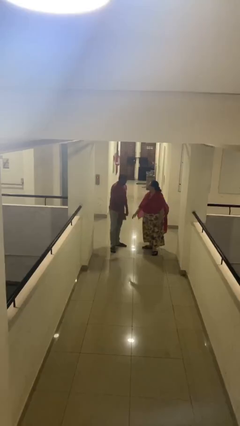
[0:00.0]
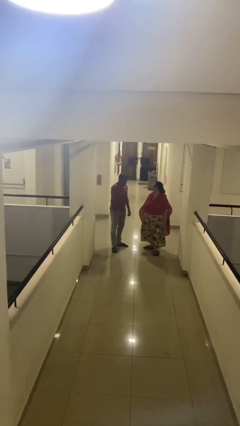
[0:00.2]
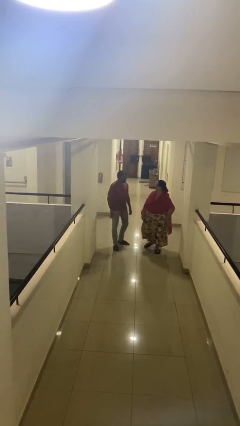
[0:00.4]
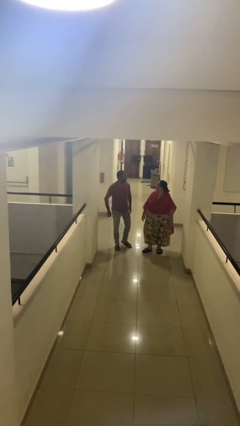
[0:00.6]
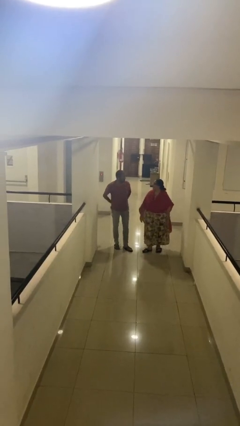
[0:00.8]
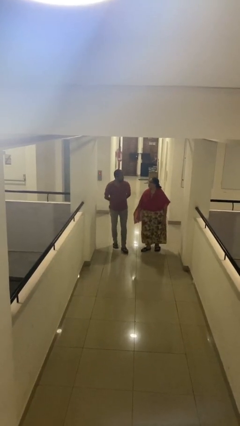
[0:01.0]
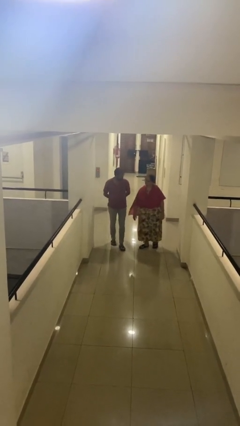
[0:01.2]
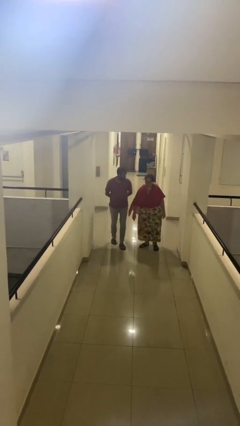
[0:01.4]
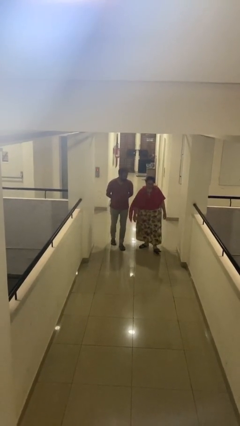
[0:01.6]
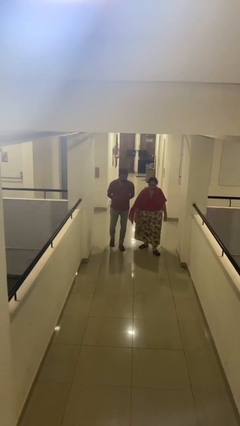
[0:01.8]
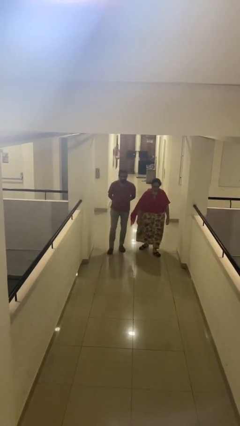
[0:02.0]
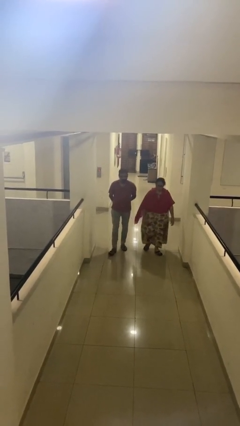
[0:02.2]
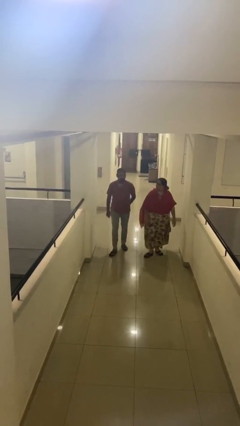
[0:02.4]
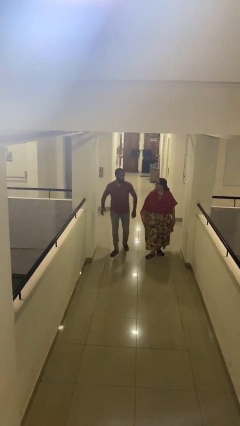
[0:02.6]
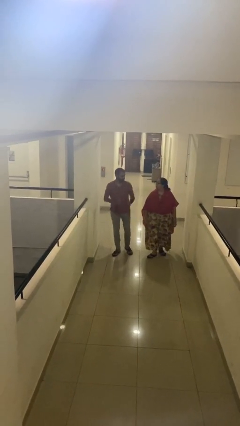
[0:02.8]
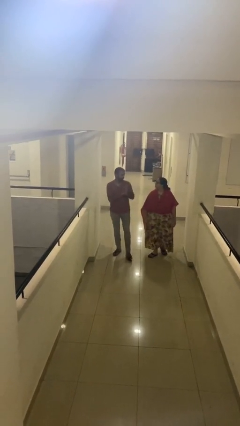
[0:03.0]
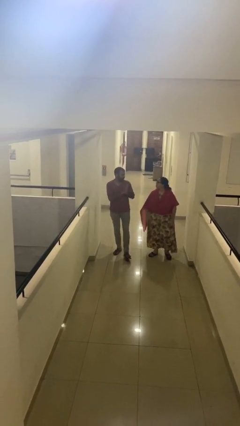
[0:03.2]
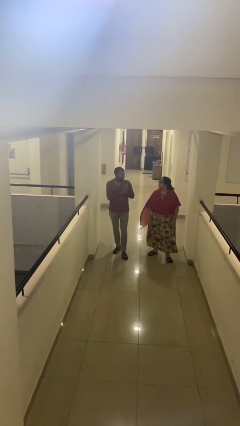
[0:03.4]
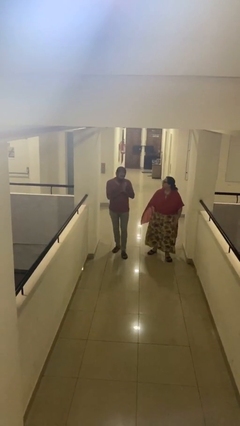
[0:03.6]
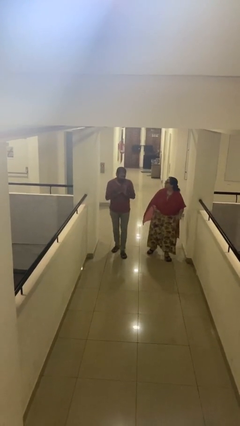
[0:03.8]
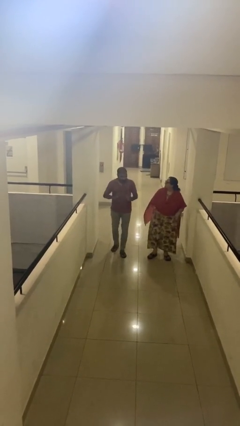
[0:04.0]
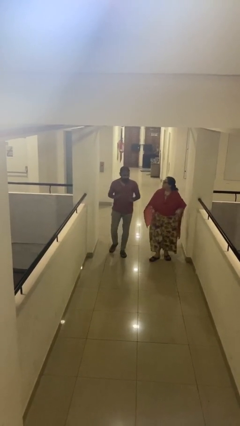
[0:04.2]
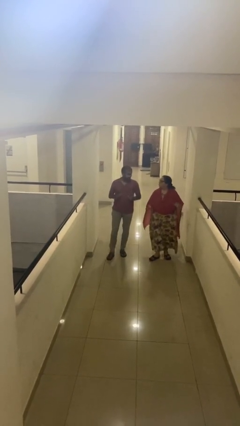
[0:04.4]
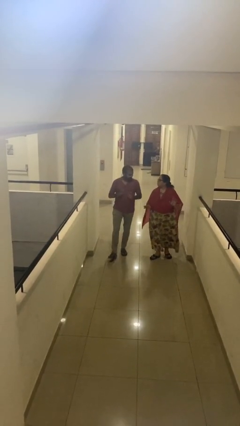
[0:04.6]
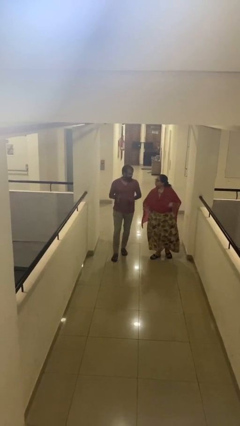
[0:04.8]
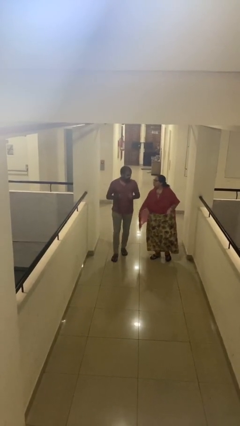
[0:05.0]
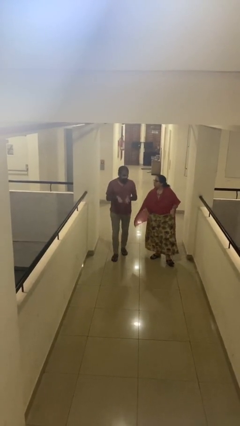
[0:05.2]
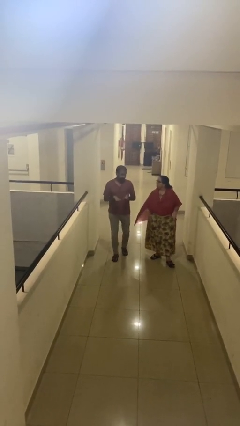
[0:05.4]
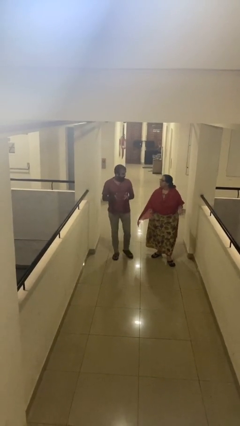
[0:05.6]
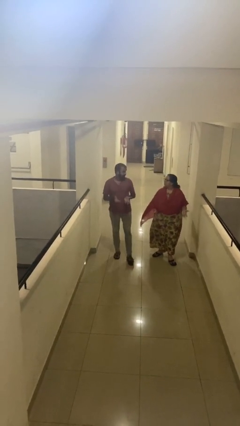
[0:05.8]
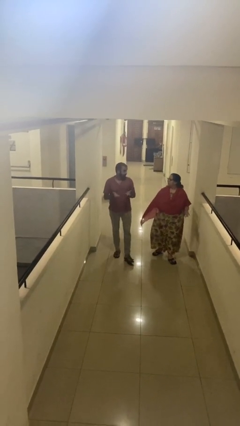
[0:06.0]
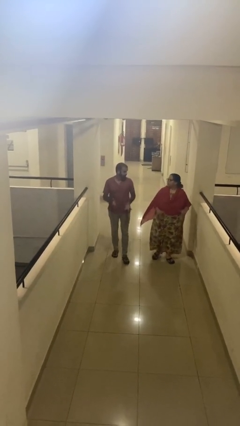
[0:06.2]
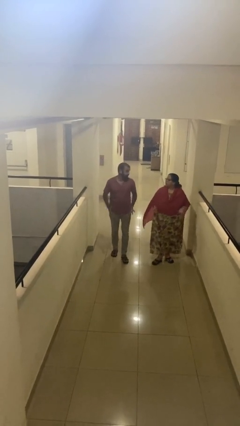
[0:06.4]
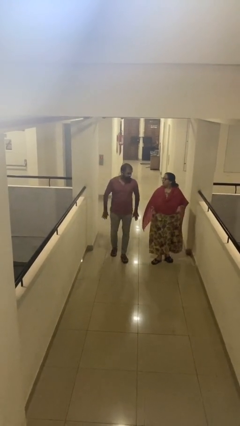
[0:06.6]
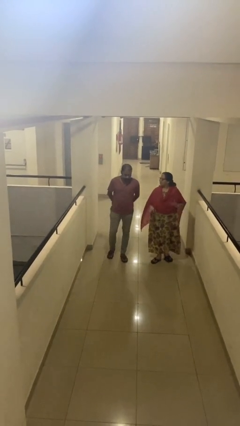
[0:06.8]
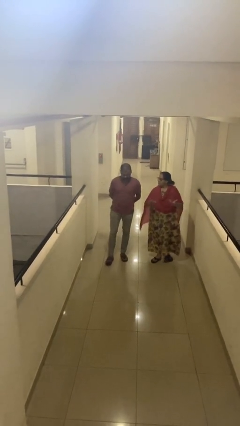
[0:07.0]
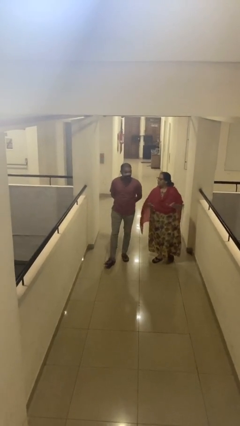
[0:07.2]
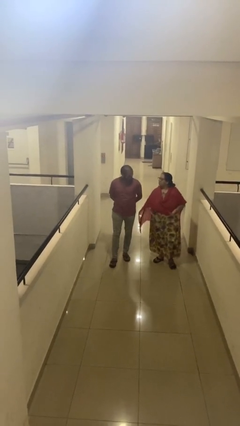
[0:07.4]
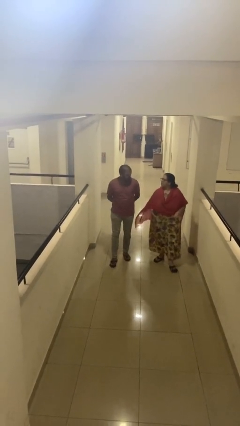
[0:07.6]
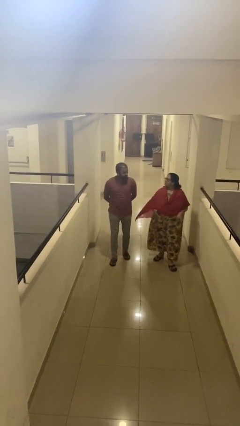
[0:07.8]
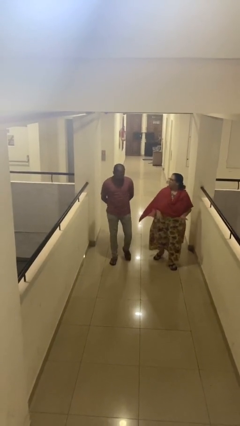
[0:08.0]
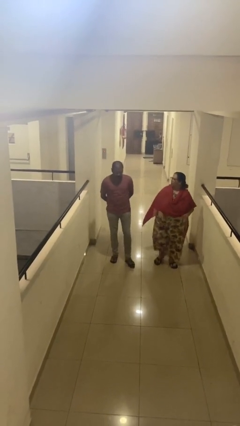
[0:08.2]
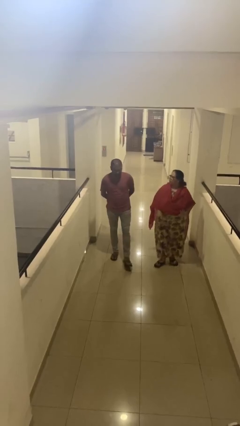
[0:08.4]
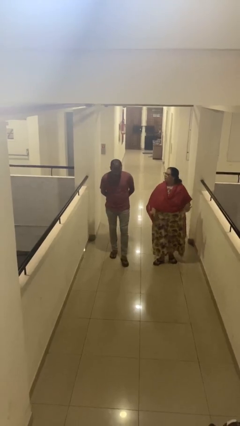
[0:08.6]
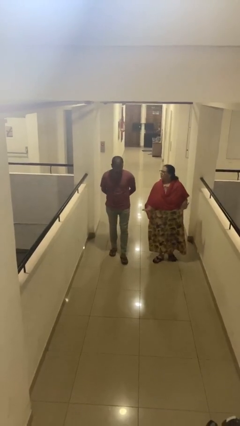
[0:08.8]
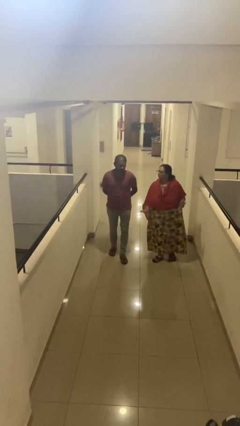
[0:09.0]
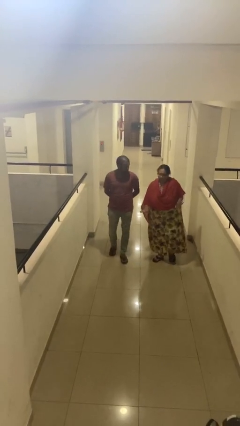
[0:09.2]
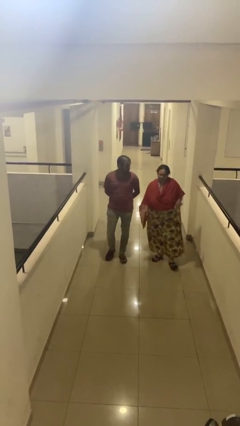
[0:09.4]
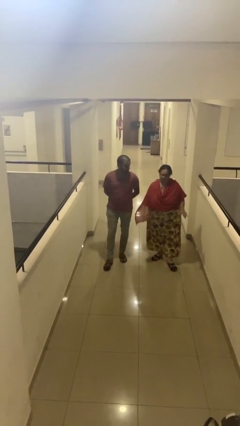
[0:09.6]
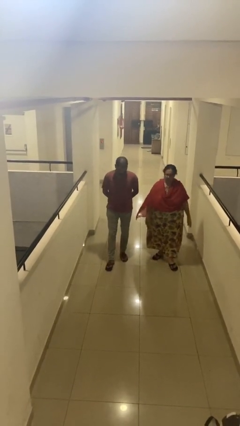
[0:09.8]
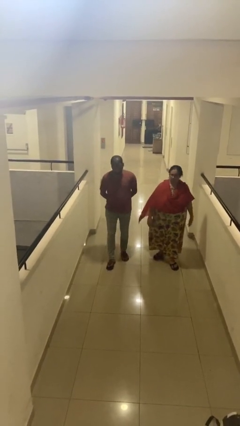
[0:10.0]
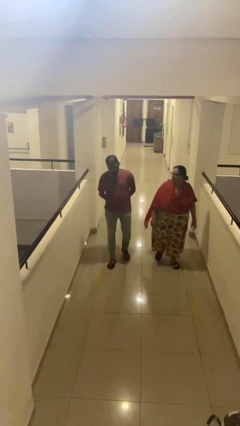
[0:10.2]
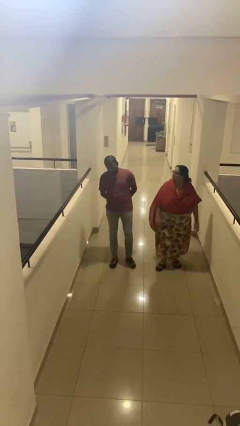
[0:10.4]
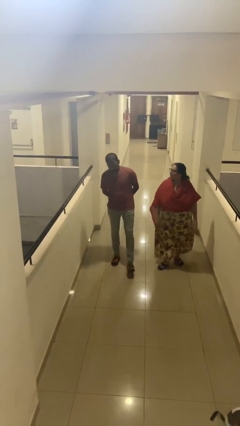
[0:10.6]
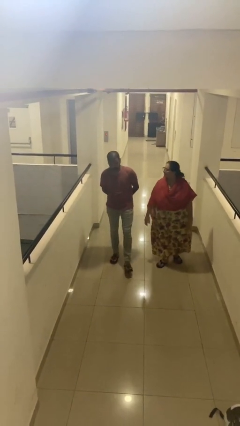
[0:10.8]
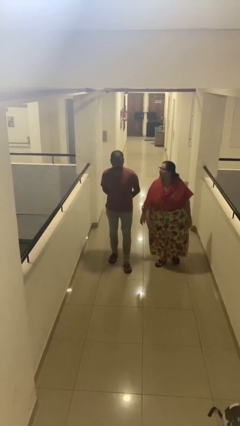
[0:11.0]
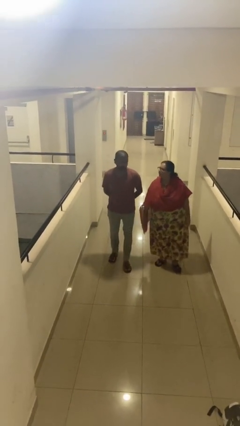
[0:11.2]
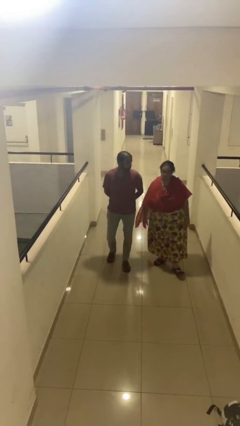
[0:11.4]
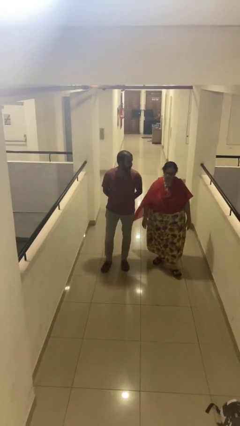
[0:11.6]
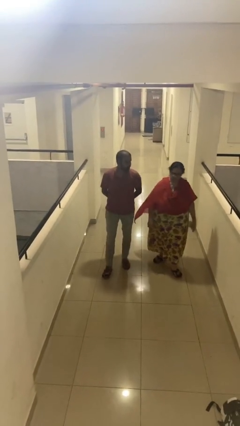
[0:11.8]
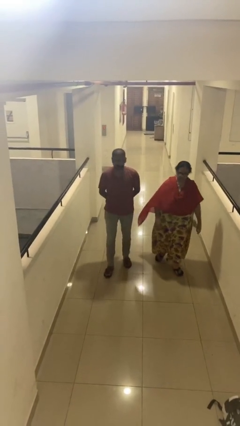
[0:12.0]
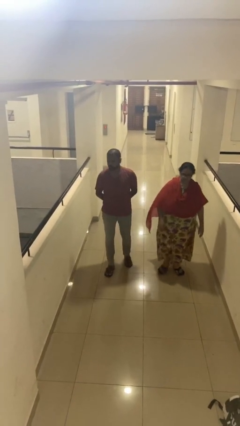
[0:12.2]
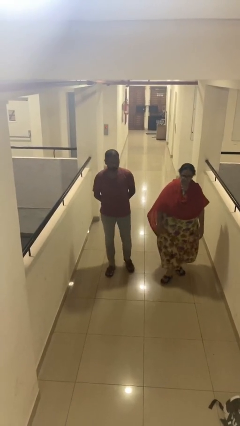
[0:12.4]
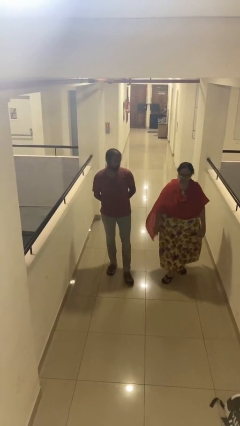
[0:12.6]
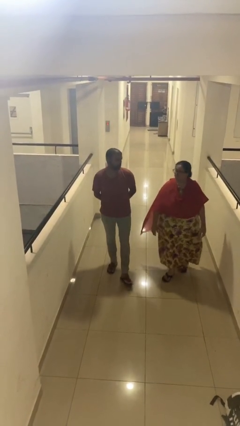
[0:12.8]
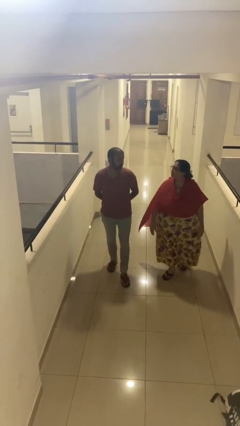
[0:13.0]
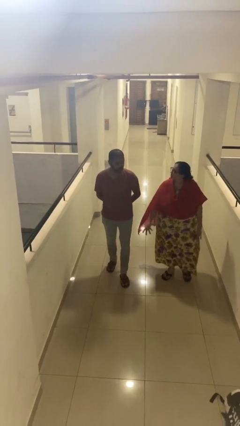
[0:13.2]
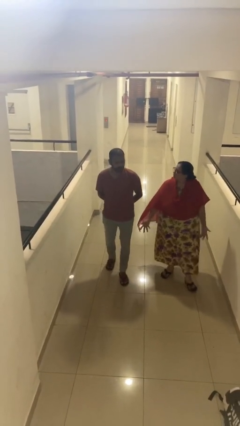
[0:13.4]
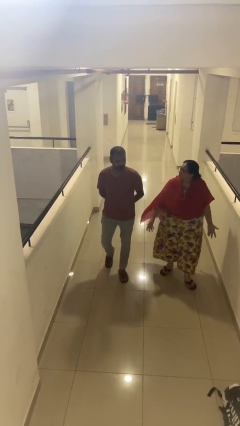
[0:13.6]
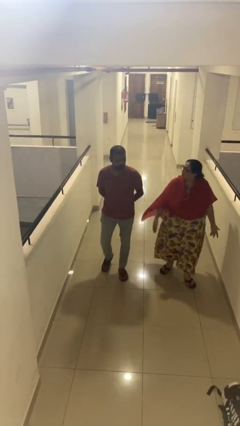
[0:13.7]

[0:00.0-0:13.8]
person talks to person

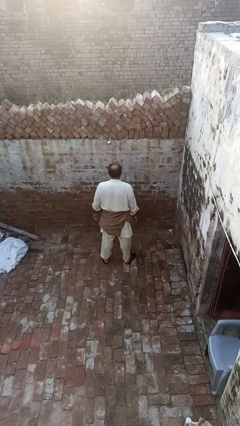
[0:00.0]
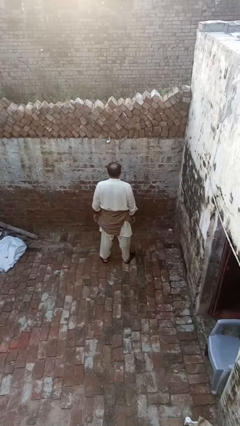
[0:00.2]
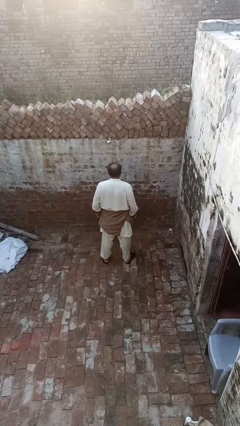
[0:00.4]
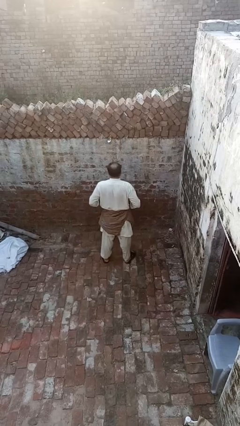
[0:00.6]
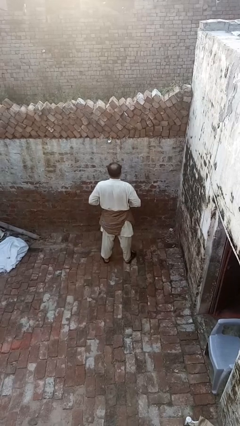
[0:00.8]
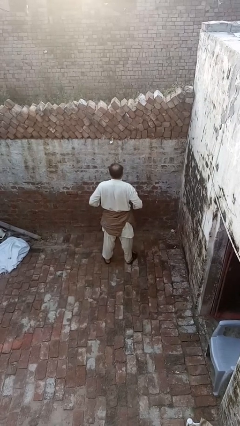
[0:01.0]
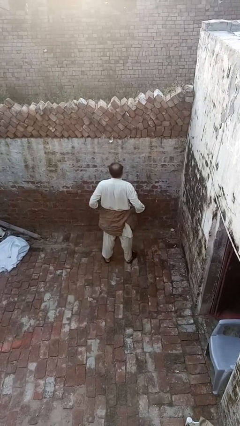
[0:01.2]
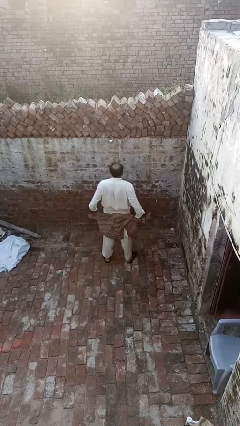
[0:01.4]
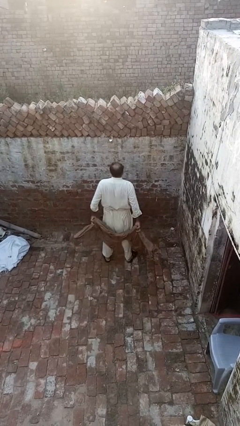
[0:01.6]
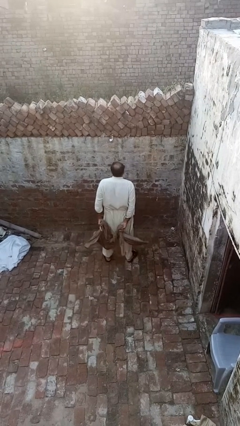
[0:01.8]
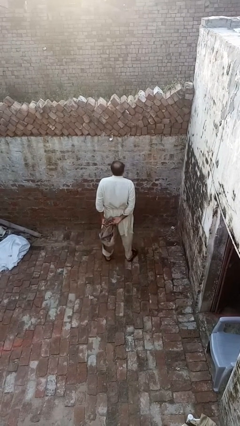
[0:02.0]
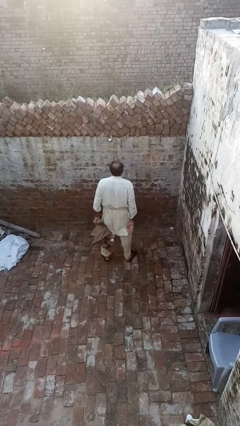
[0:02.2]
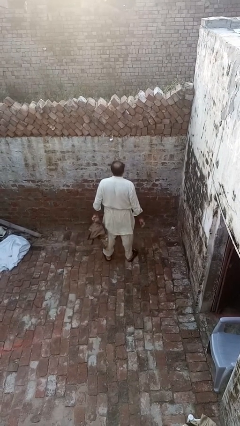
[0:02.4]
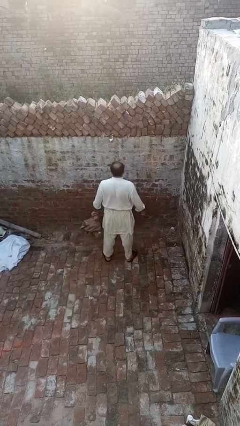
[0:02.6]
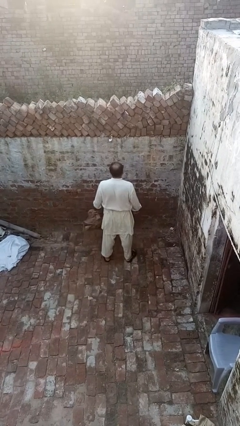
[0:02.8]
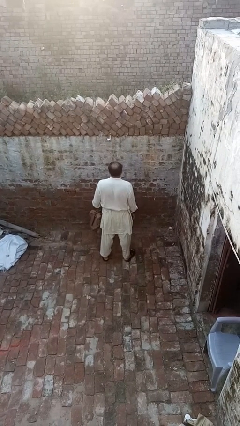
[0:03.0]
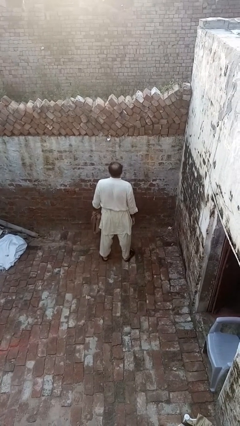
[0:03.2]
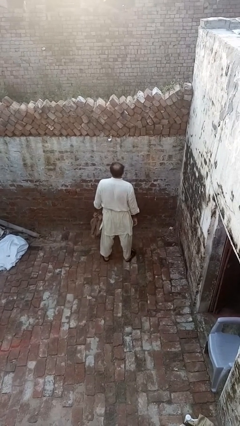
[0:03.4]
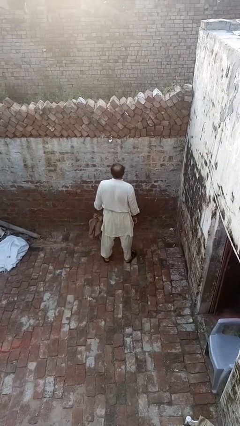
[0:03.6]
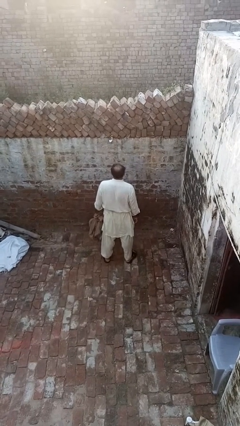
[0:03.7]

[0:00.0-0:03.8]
person unties jacket around waist

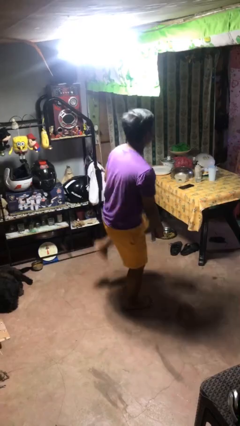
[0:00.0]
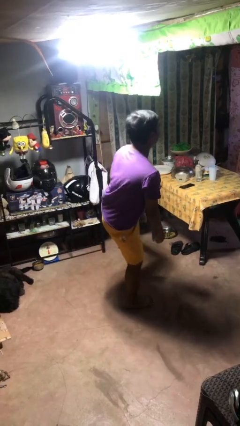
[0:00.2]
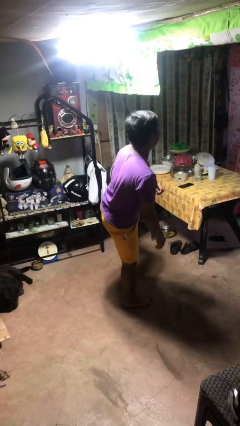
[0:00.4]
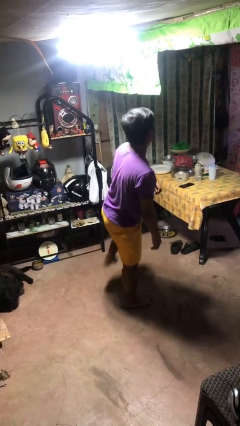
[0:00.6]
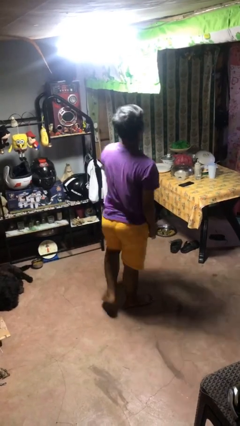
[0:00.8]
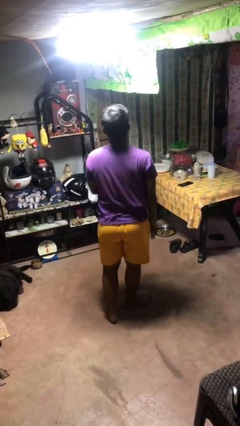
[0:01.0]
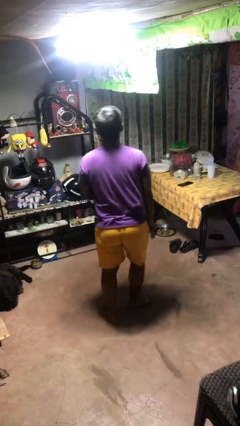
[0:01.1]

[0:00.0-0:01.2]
person karate kicks
